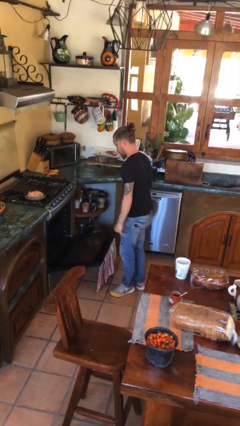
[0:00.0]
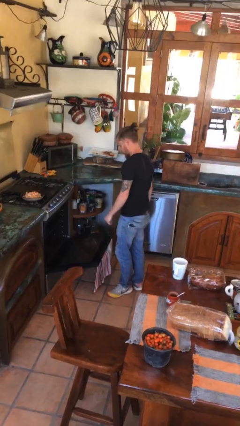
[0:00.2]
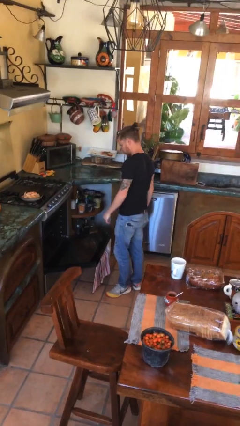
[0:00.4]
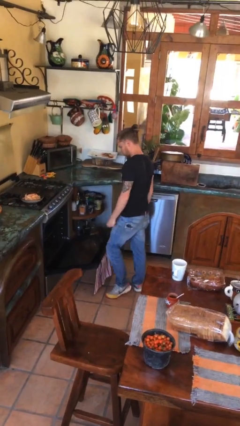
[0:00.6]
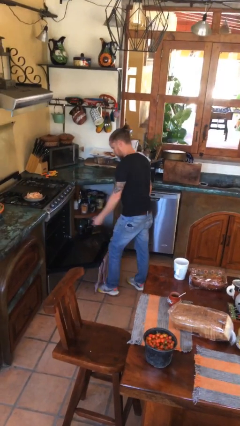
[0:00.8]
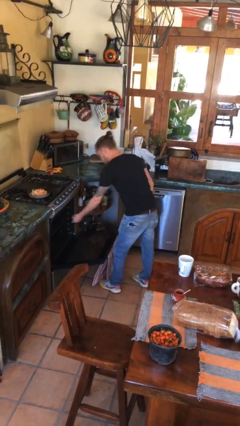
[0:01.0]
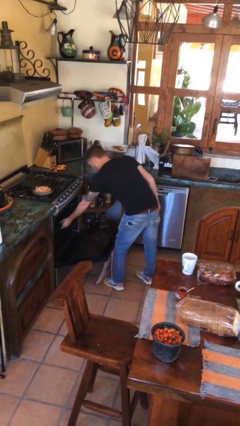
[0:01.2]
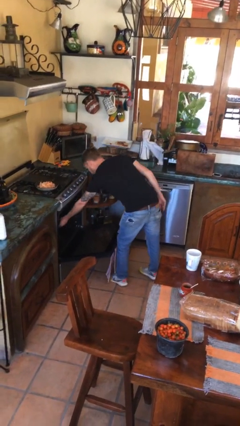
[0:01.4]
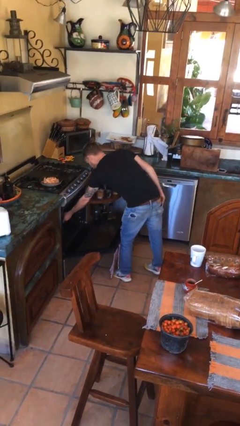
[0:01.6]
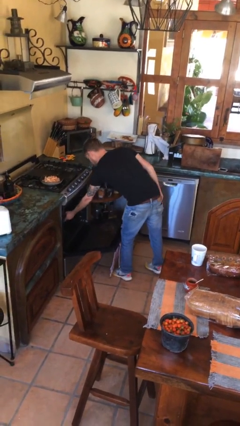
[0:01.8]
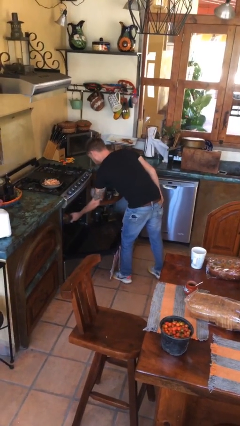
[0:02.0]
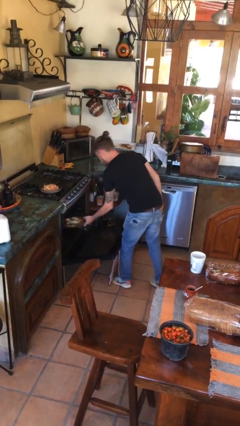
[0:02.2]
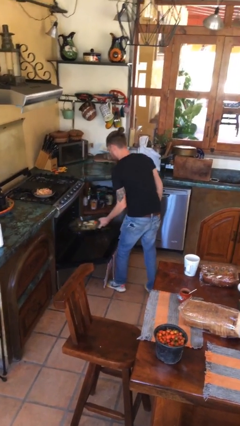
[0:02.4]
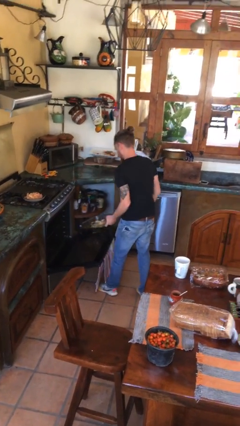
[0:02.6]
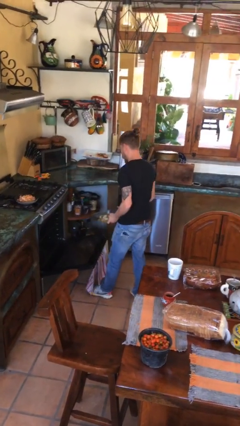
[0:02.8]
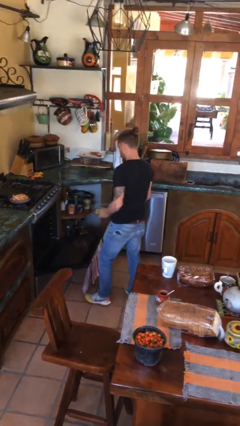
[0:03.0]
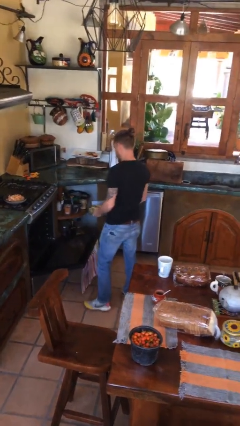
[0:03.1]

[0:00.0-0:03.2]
person takes object from oven

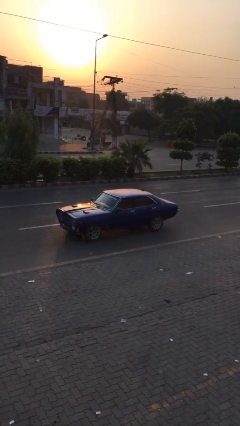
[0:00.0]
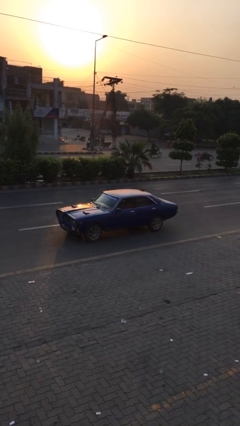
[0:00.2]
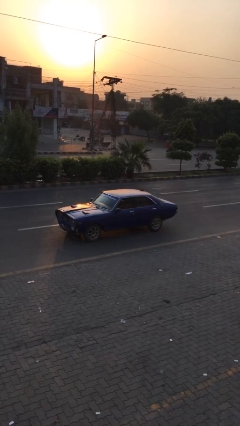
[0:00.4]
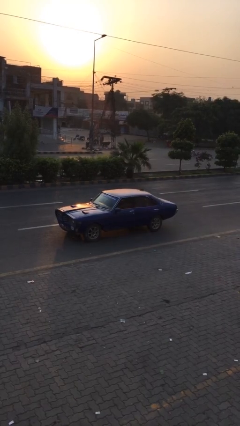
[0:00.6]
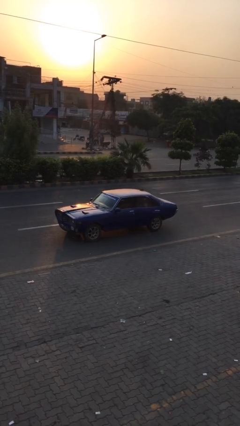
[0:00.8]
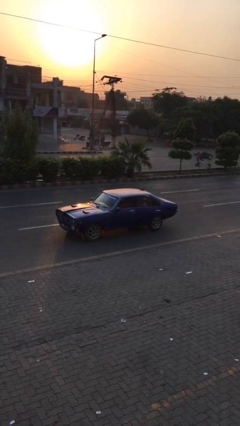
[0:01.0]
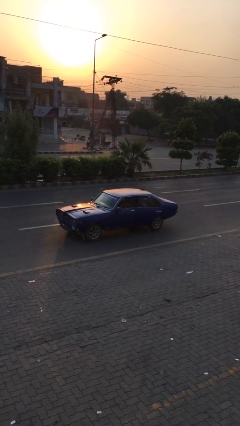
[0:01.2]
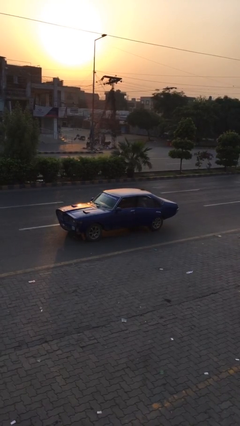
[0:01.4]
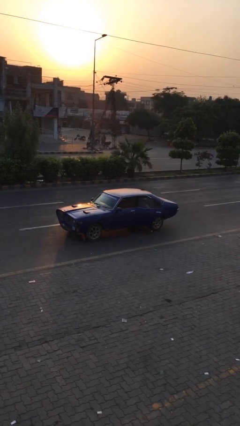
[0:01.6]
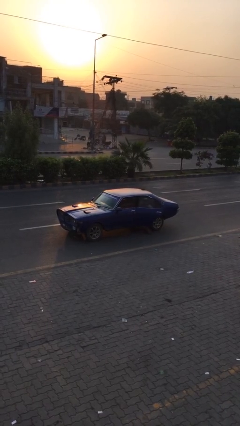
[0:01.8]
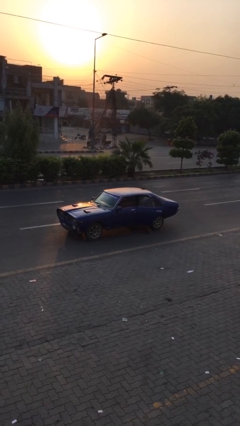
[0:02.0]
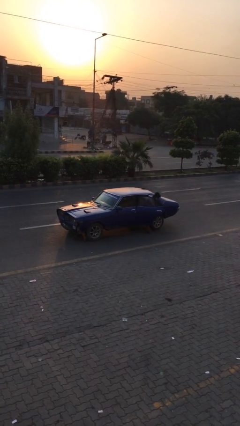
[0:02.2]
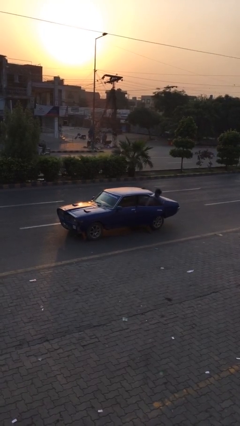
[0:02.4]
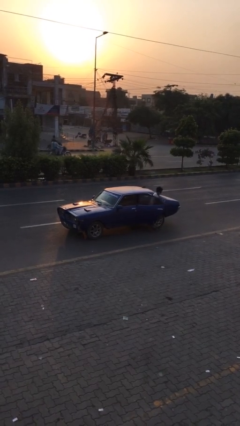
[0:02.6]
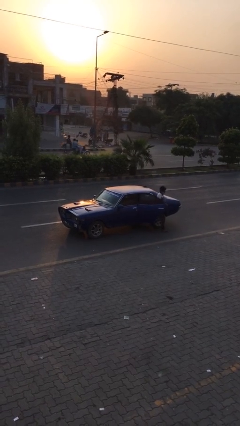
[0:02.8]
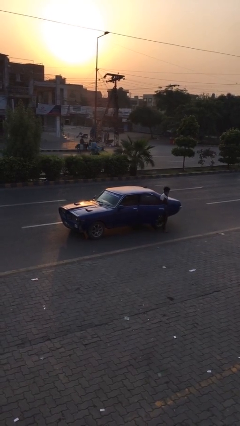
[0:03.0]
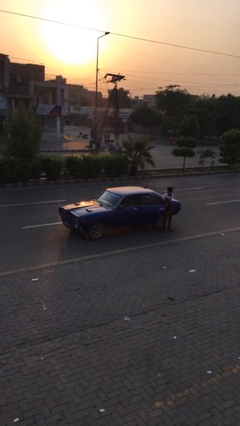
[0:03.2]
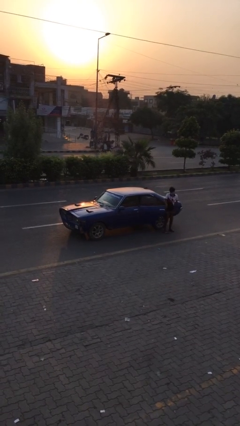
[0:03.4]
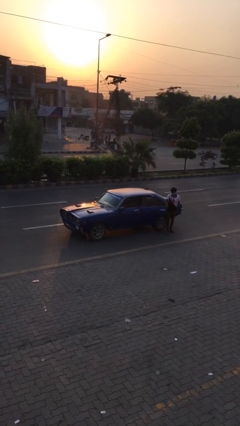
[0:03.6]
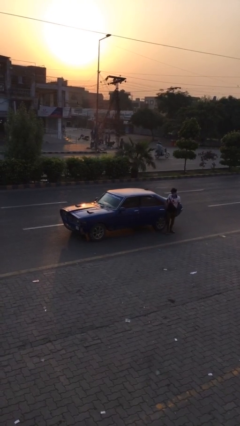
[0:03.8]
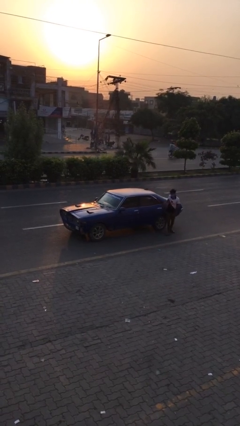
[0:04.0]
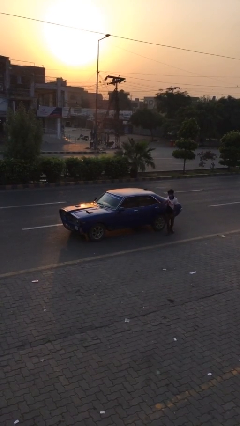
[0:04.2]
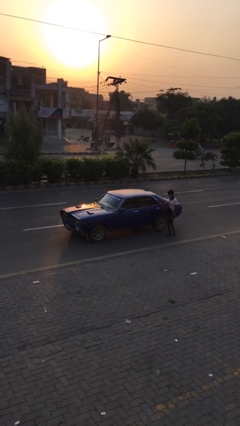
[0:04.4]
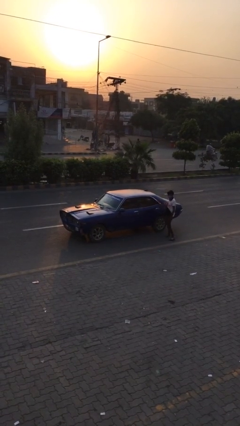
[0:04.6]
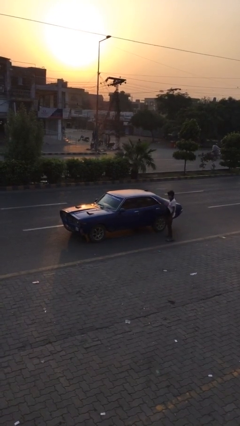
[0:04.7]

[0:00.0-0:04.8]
car drops off person

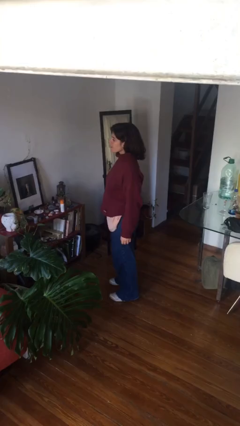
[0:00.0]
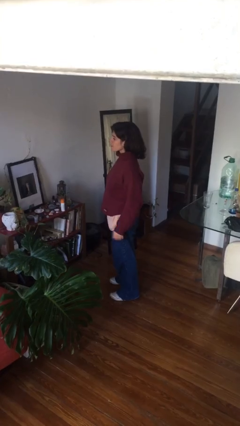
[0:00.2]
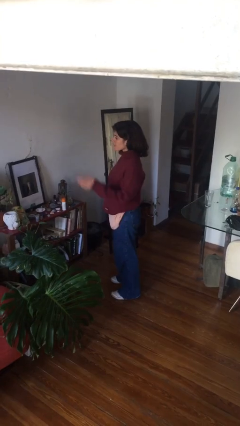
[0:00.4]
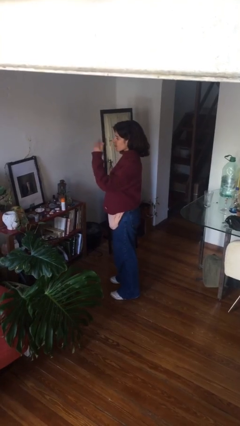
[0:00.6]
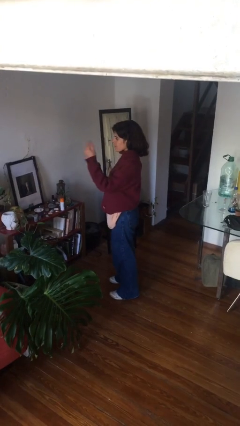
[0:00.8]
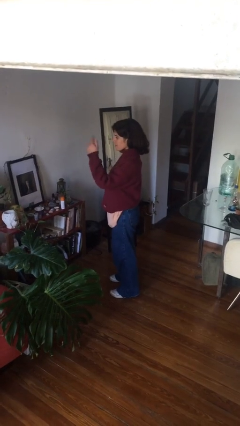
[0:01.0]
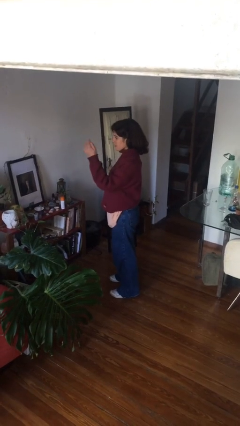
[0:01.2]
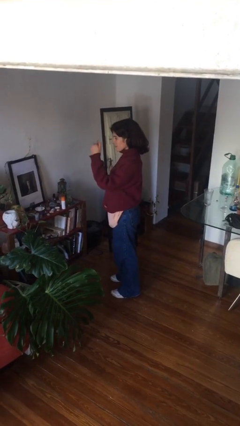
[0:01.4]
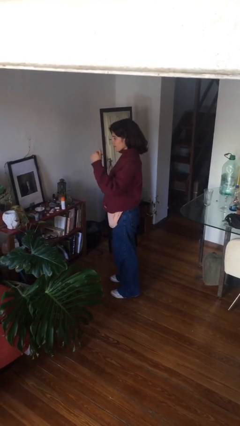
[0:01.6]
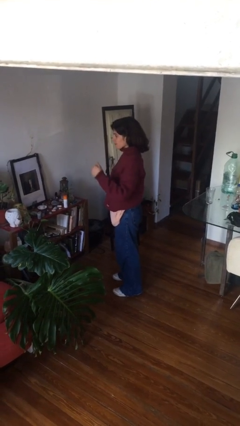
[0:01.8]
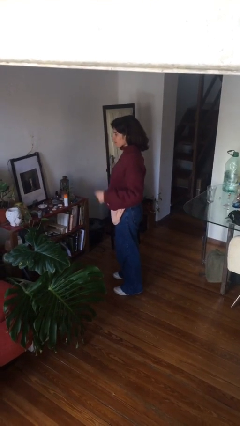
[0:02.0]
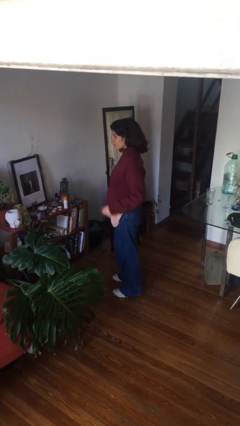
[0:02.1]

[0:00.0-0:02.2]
person gestures come here

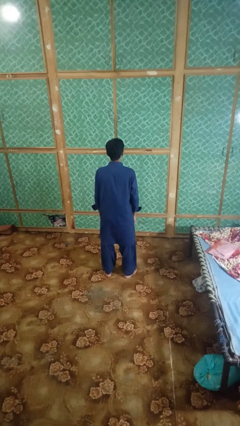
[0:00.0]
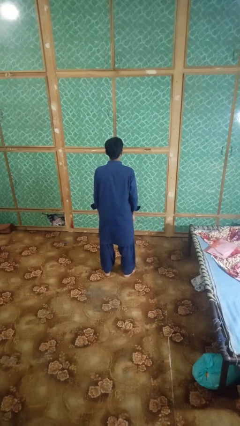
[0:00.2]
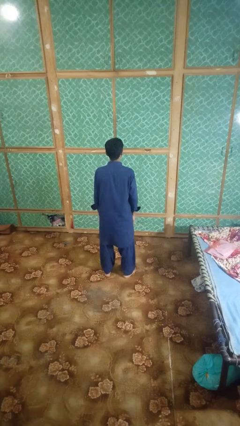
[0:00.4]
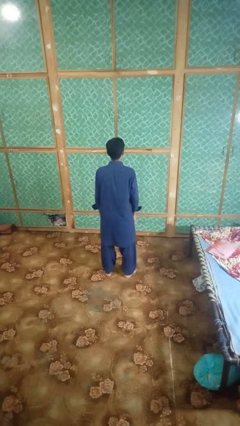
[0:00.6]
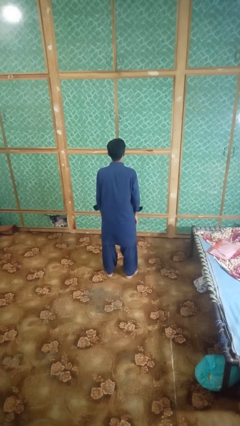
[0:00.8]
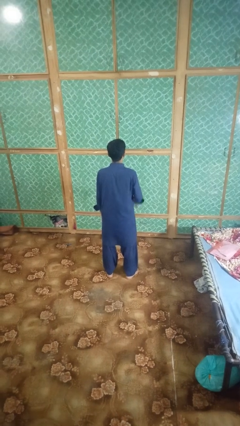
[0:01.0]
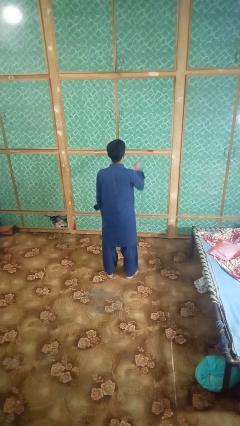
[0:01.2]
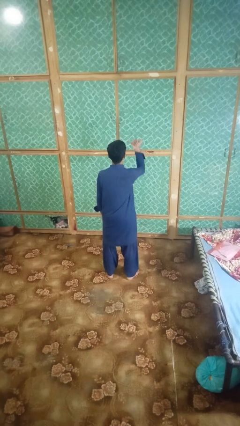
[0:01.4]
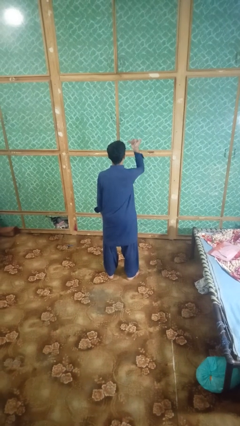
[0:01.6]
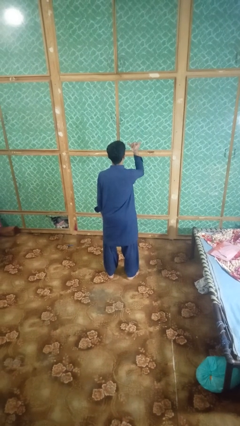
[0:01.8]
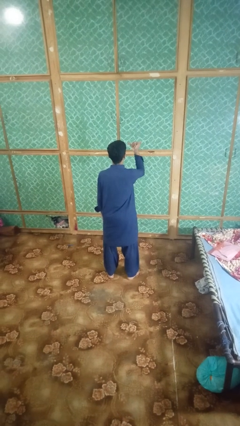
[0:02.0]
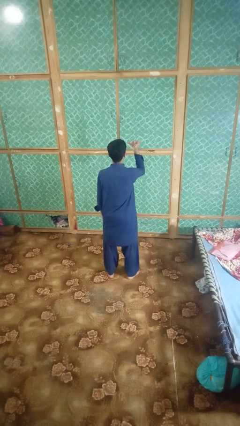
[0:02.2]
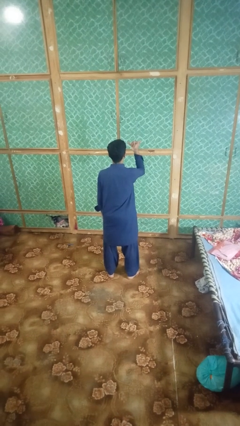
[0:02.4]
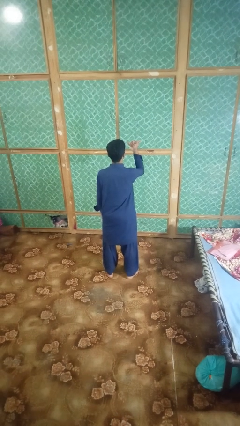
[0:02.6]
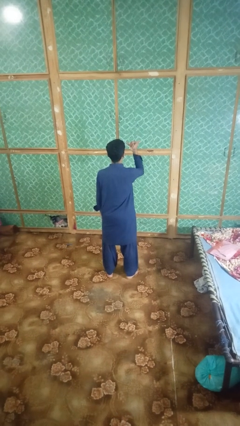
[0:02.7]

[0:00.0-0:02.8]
person gestures hang loose

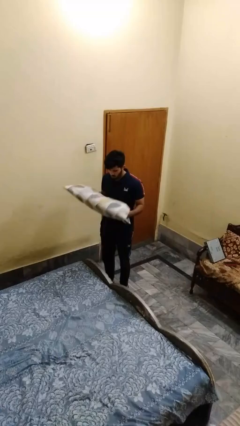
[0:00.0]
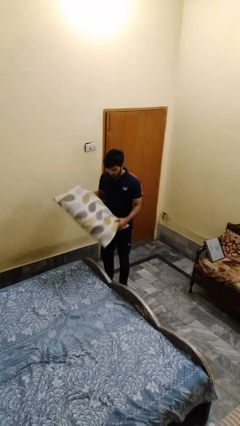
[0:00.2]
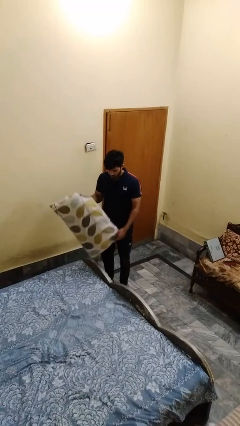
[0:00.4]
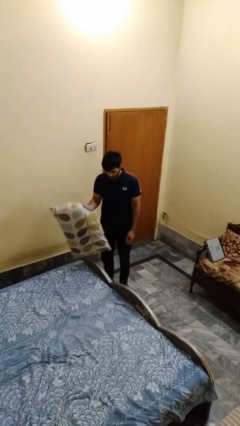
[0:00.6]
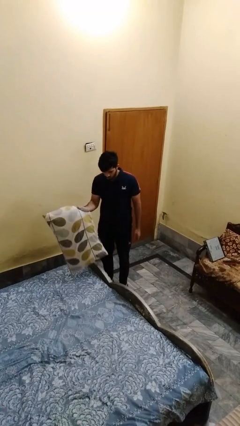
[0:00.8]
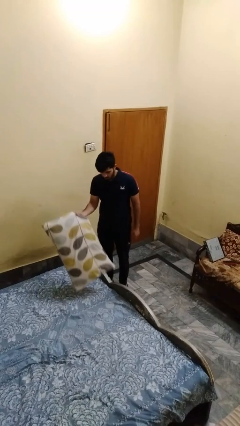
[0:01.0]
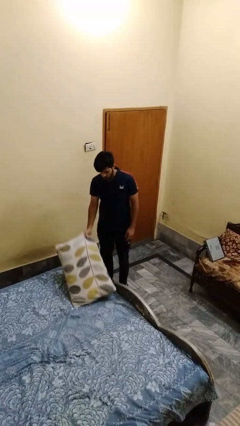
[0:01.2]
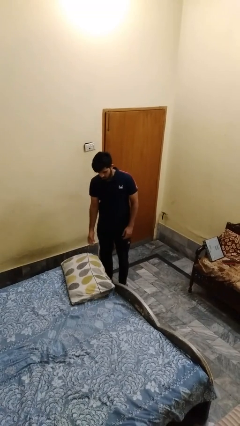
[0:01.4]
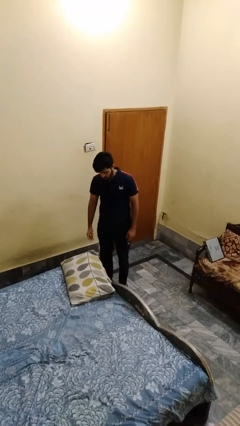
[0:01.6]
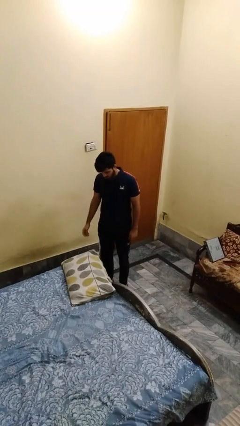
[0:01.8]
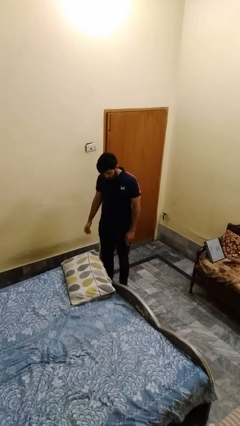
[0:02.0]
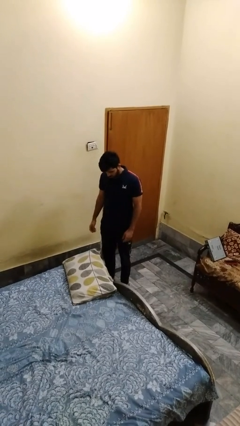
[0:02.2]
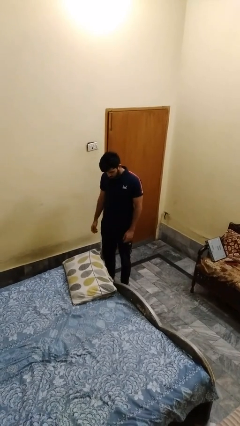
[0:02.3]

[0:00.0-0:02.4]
person puts down object on bed

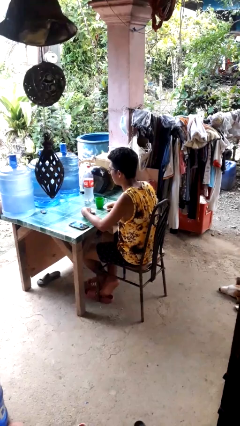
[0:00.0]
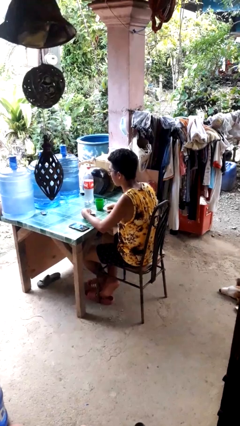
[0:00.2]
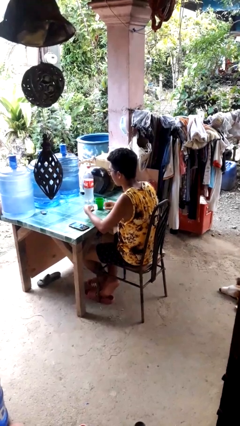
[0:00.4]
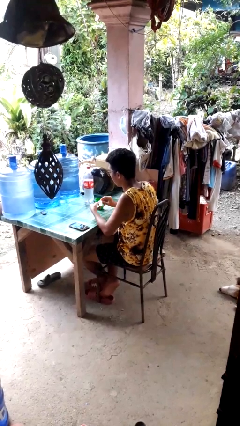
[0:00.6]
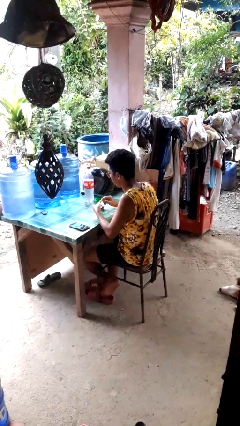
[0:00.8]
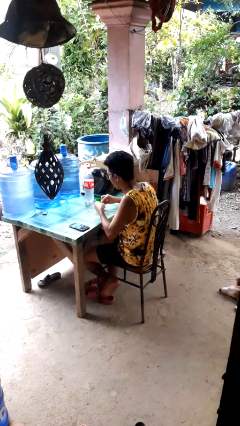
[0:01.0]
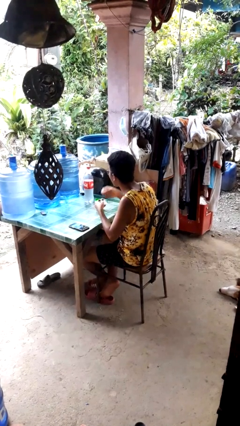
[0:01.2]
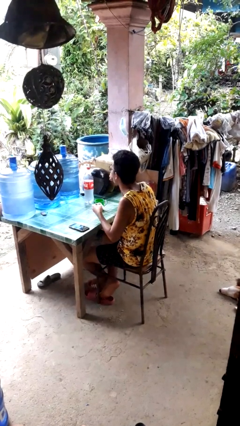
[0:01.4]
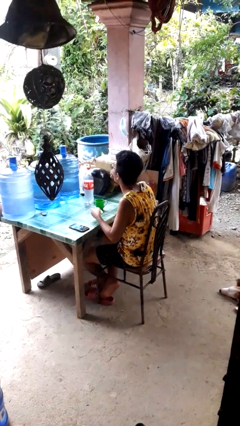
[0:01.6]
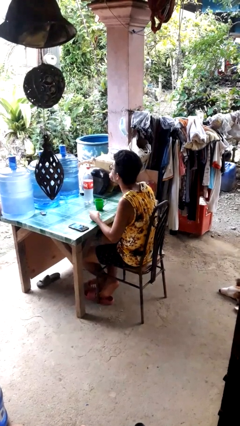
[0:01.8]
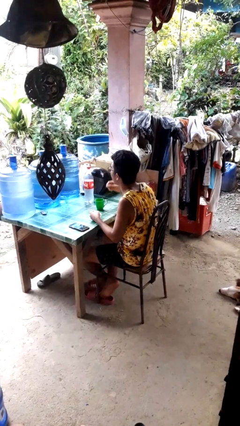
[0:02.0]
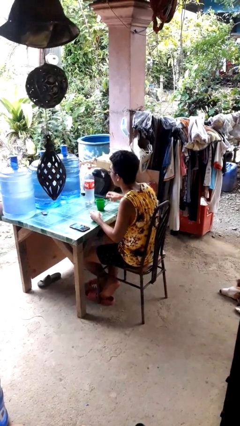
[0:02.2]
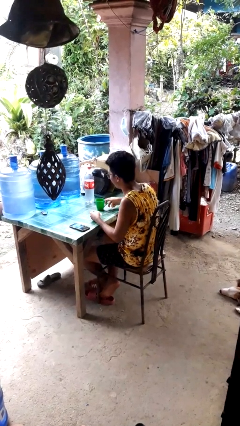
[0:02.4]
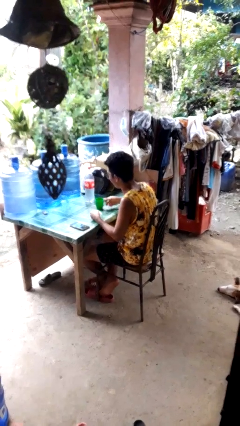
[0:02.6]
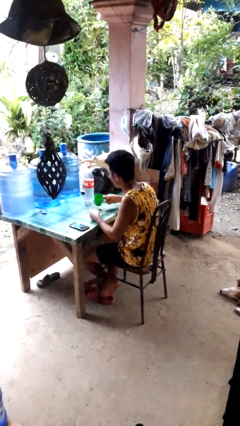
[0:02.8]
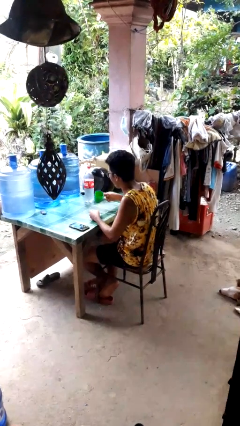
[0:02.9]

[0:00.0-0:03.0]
person takes medicine pills
